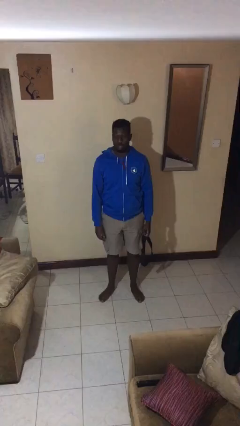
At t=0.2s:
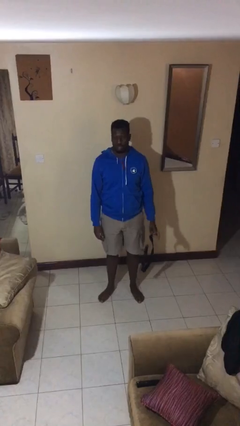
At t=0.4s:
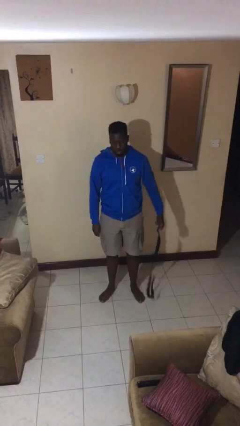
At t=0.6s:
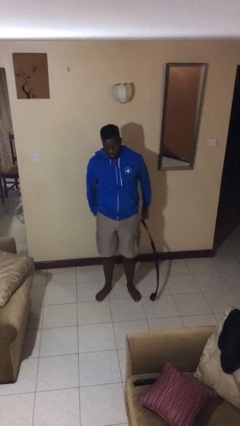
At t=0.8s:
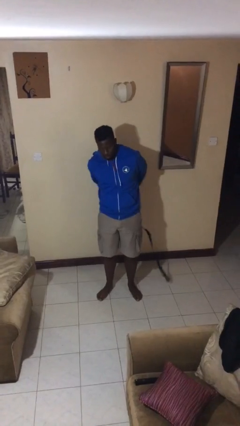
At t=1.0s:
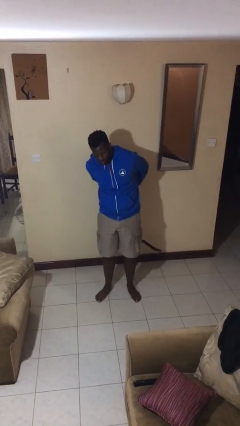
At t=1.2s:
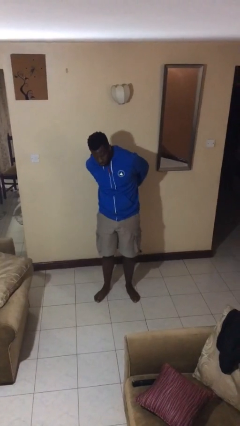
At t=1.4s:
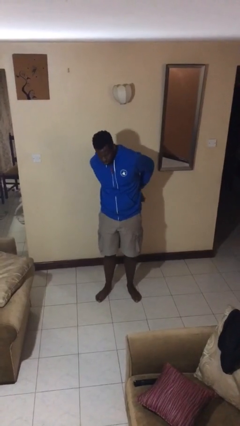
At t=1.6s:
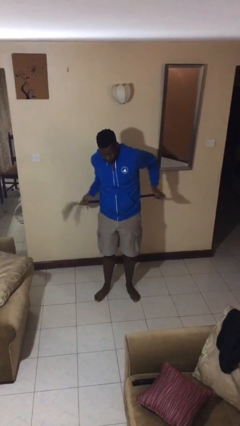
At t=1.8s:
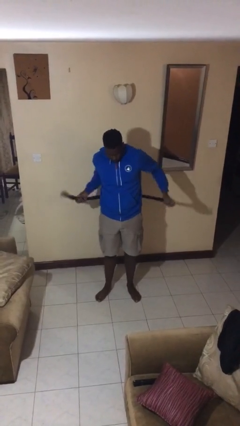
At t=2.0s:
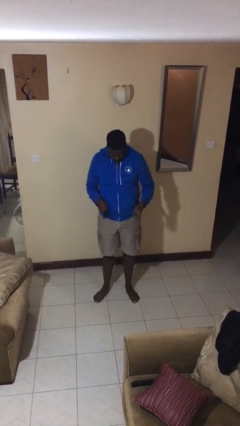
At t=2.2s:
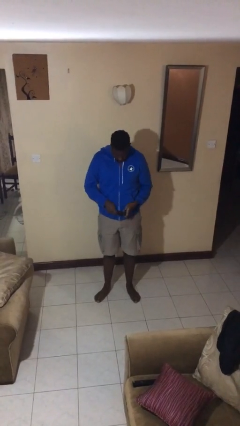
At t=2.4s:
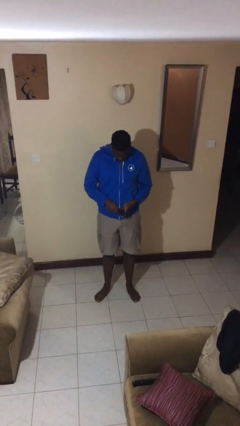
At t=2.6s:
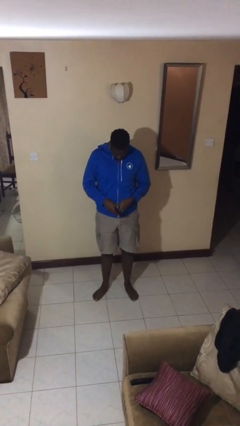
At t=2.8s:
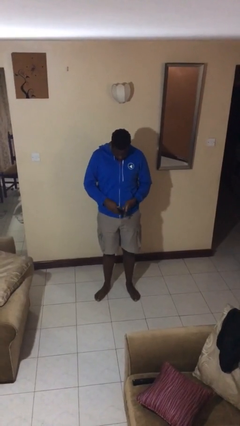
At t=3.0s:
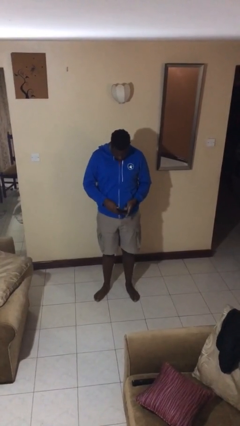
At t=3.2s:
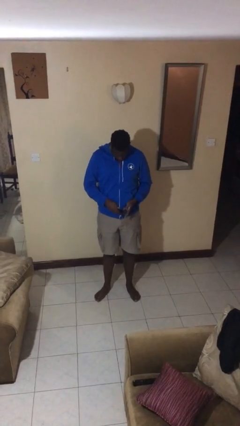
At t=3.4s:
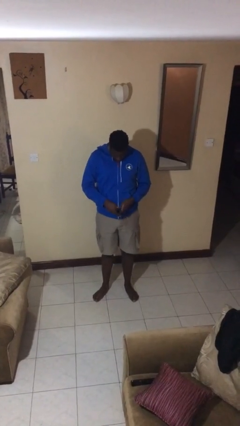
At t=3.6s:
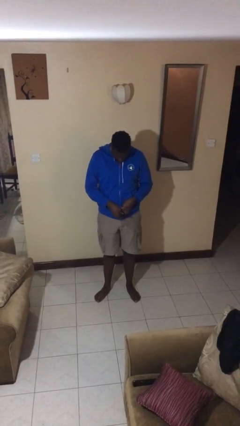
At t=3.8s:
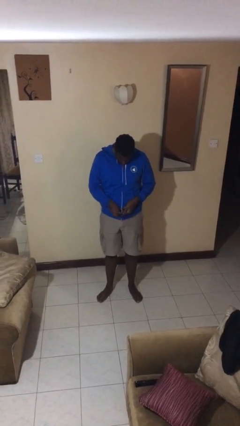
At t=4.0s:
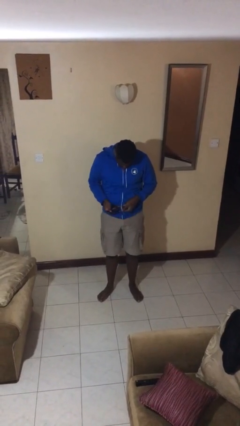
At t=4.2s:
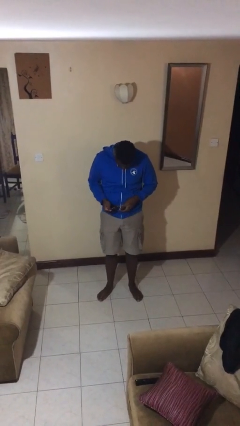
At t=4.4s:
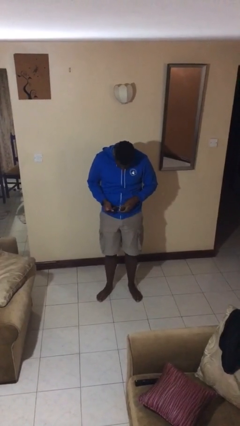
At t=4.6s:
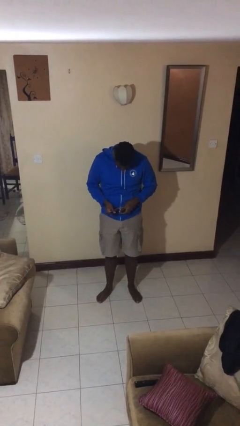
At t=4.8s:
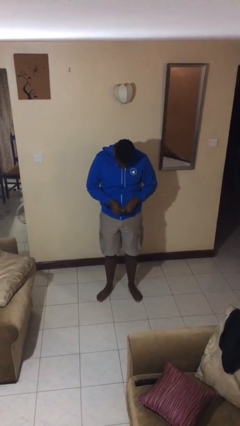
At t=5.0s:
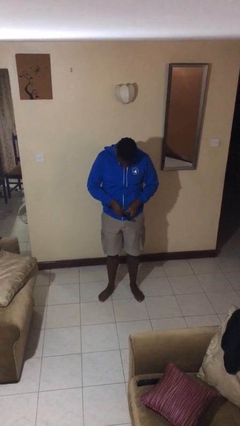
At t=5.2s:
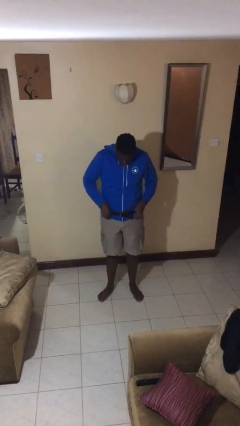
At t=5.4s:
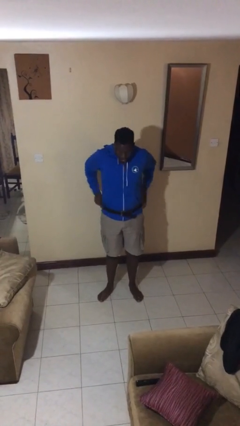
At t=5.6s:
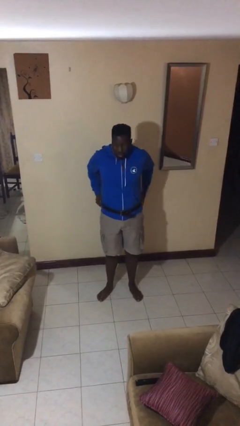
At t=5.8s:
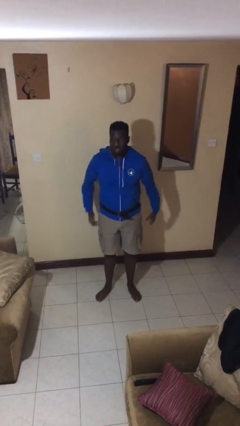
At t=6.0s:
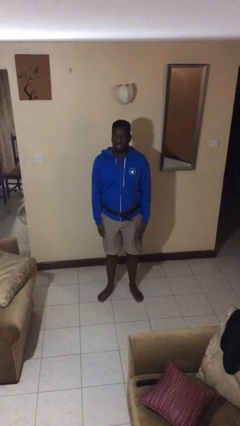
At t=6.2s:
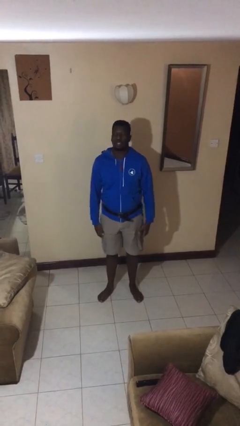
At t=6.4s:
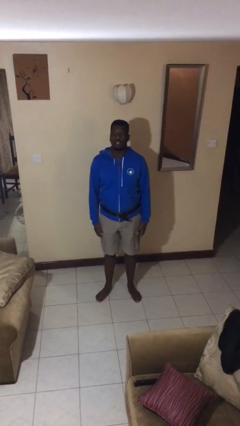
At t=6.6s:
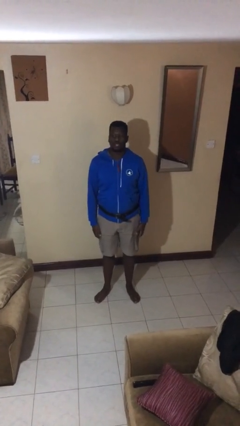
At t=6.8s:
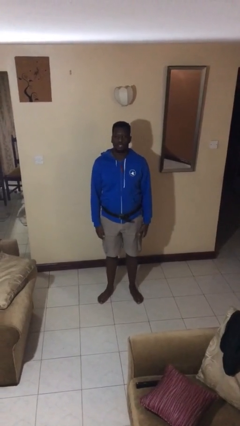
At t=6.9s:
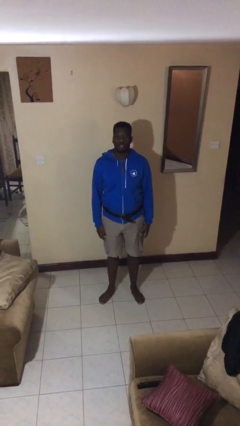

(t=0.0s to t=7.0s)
person puts on belt

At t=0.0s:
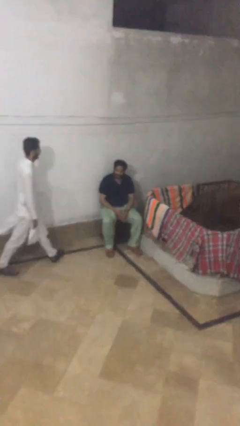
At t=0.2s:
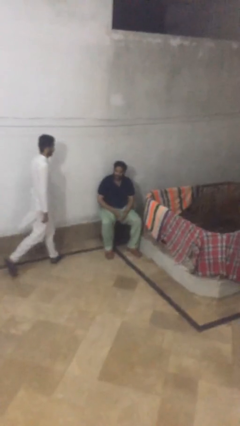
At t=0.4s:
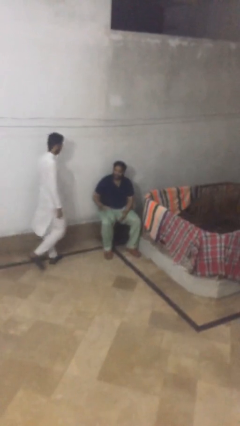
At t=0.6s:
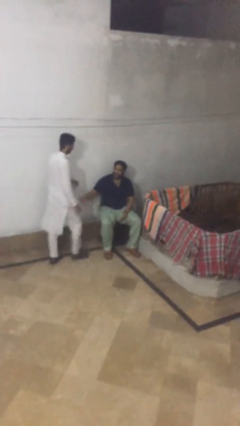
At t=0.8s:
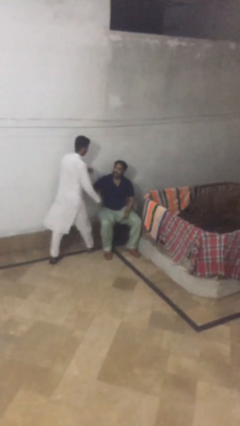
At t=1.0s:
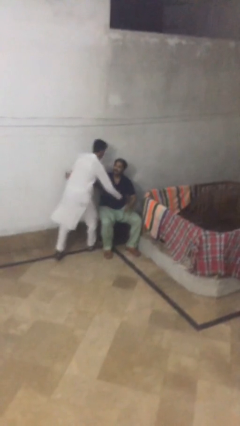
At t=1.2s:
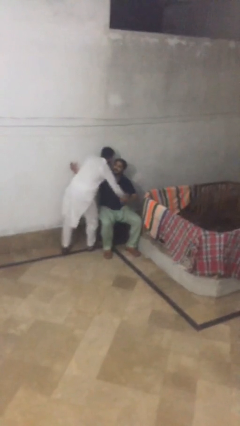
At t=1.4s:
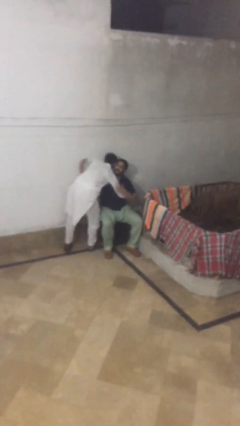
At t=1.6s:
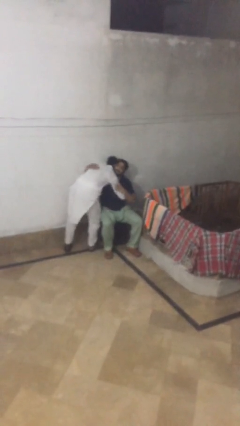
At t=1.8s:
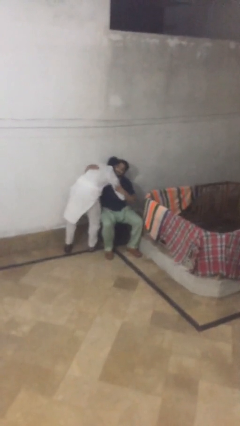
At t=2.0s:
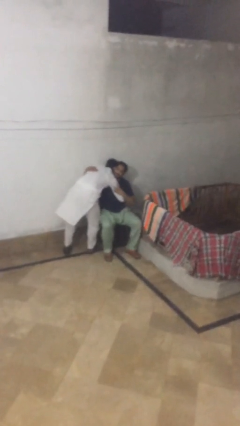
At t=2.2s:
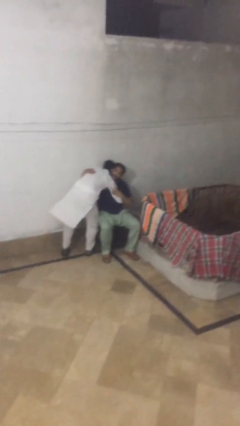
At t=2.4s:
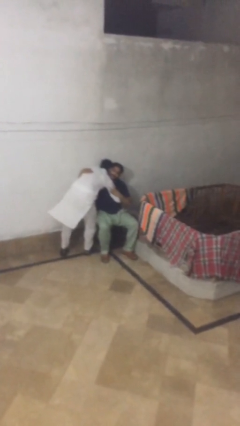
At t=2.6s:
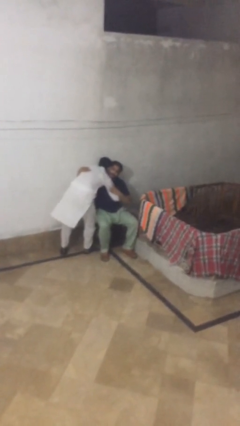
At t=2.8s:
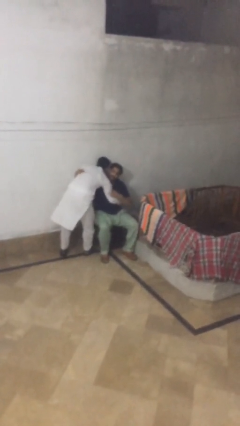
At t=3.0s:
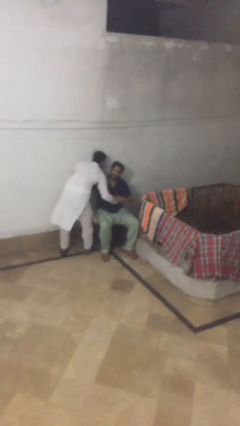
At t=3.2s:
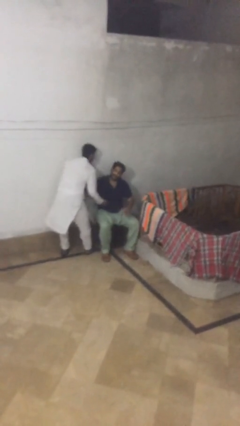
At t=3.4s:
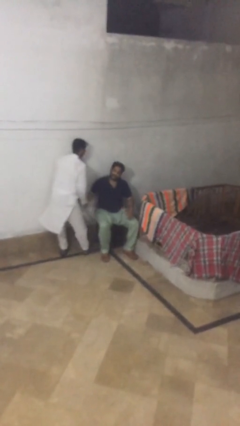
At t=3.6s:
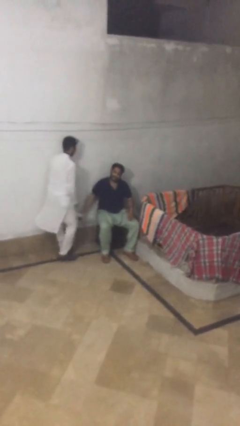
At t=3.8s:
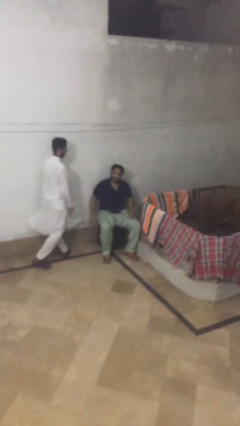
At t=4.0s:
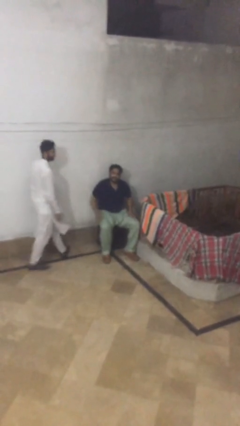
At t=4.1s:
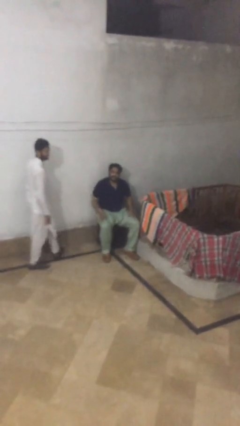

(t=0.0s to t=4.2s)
person embraces person

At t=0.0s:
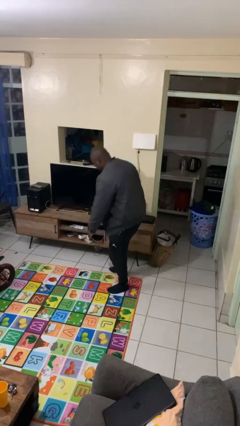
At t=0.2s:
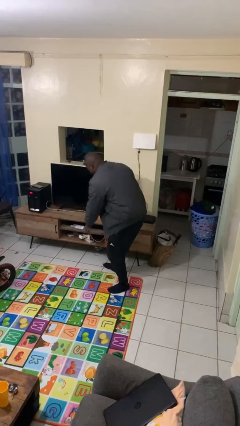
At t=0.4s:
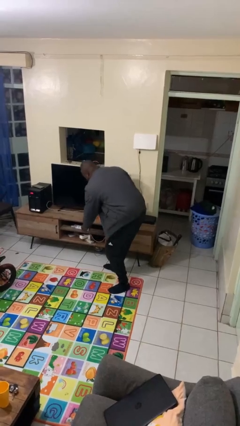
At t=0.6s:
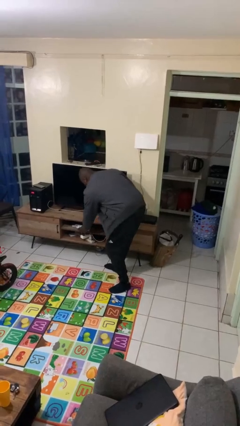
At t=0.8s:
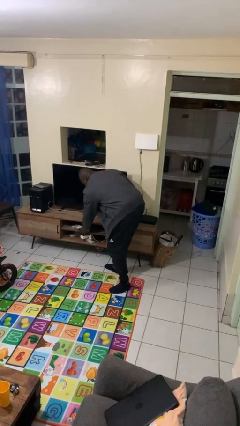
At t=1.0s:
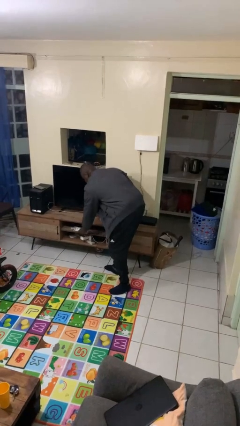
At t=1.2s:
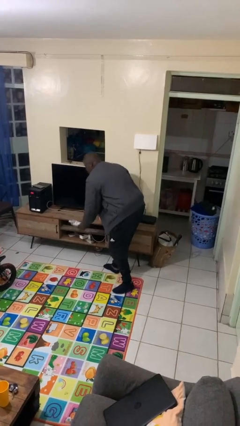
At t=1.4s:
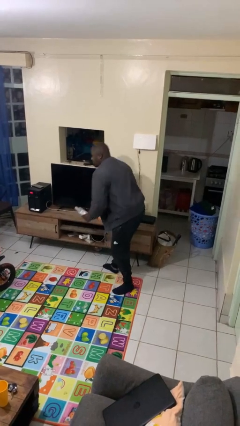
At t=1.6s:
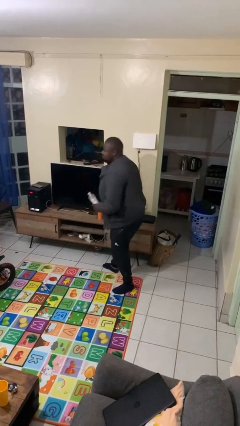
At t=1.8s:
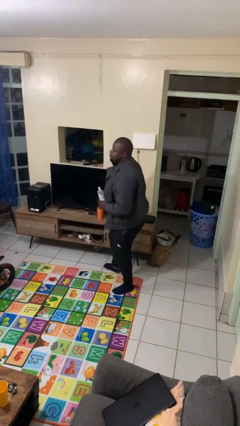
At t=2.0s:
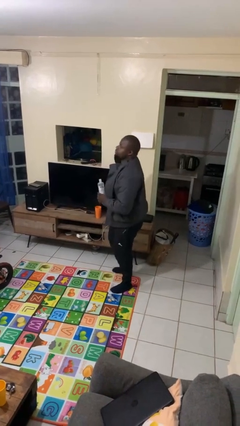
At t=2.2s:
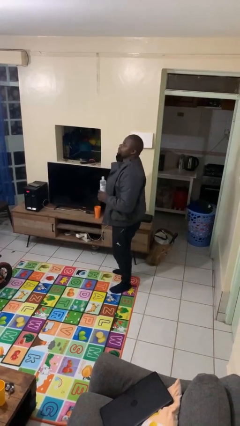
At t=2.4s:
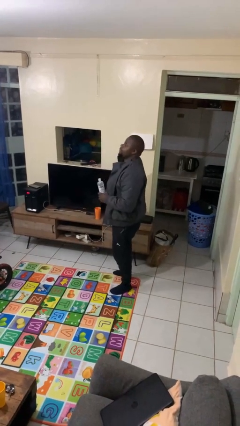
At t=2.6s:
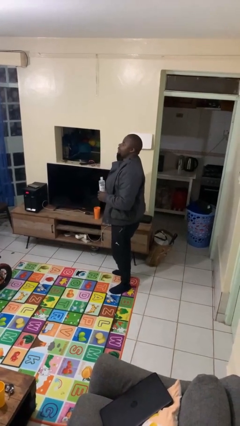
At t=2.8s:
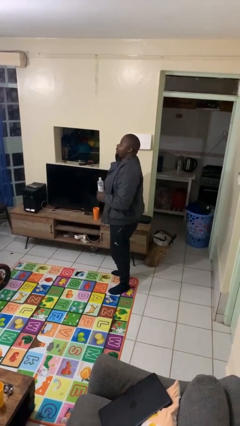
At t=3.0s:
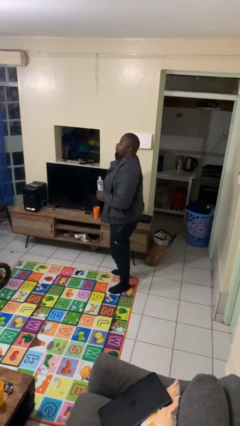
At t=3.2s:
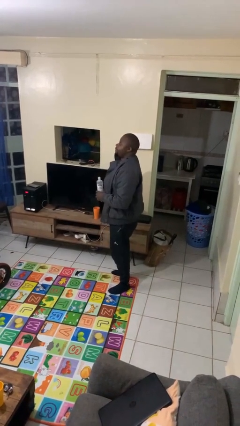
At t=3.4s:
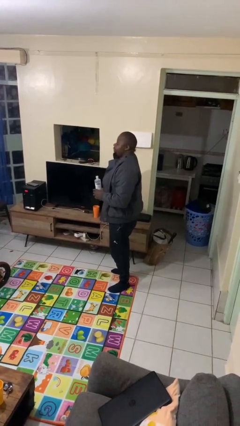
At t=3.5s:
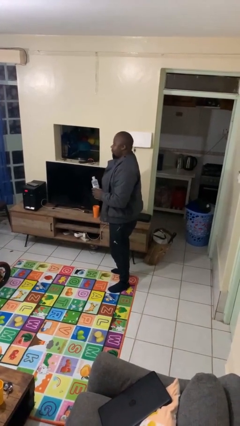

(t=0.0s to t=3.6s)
person picks up object from cabinet

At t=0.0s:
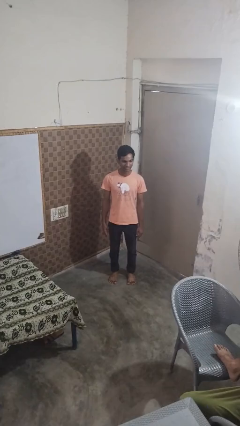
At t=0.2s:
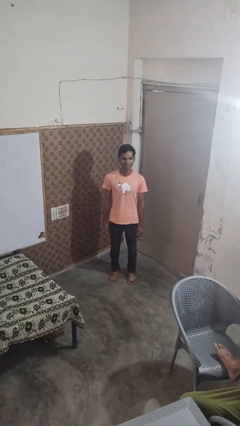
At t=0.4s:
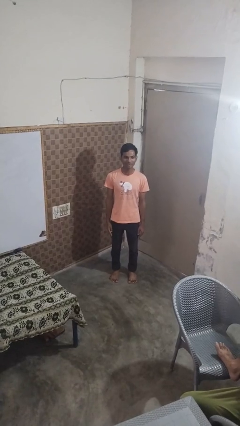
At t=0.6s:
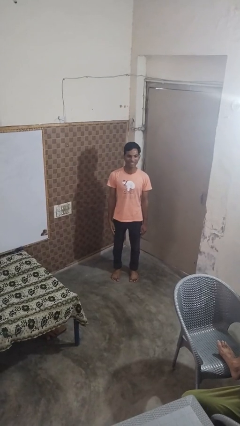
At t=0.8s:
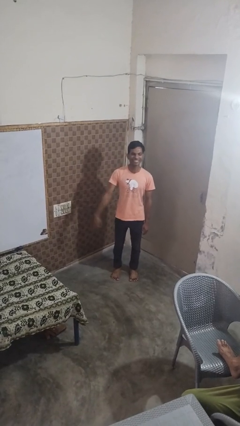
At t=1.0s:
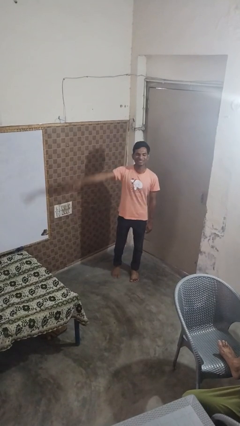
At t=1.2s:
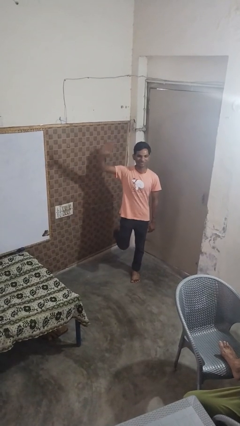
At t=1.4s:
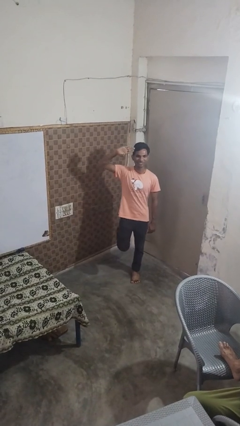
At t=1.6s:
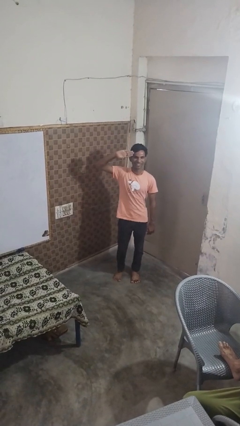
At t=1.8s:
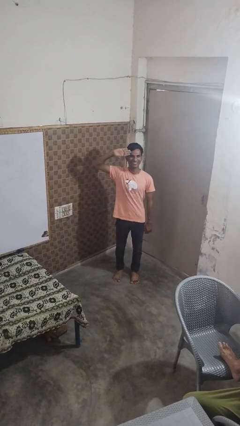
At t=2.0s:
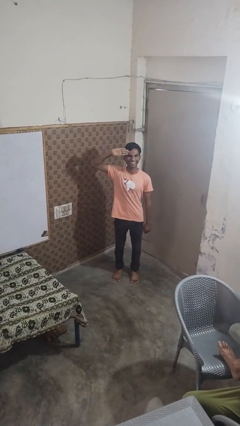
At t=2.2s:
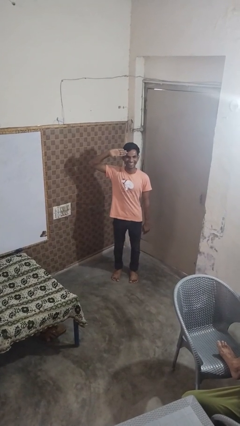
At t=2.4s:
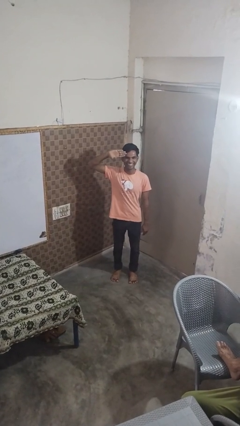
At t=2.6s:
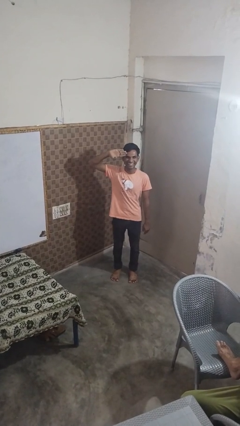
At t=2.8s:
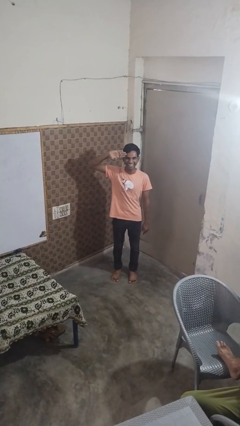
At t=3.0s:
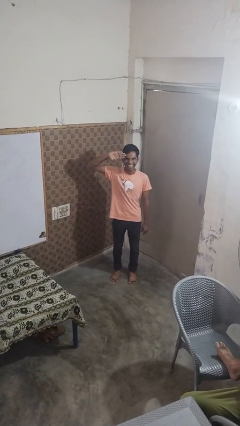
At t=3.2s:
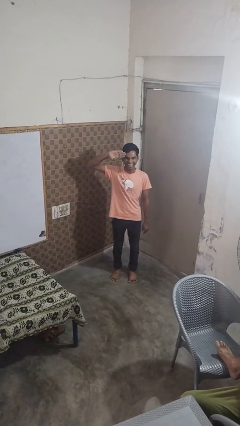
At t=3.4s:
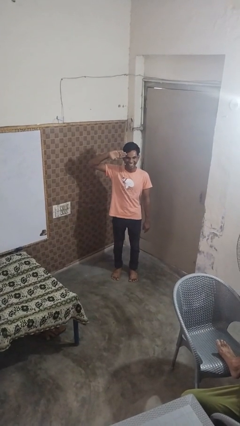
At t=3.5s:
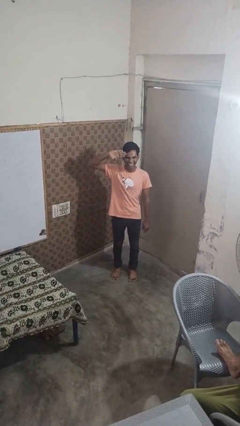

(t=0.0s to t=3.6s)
person salutes
